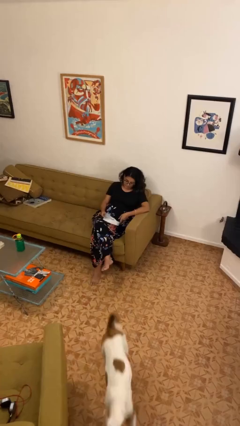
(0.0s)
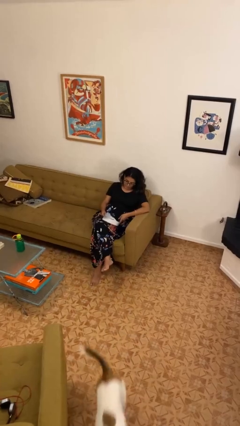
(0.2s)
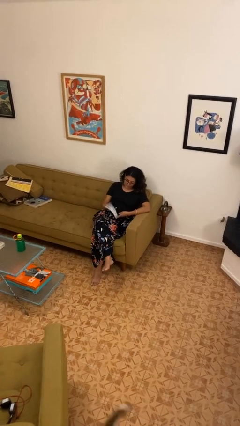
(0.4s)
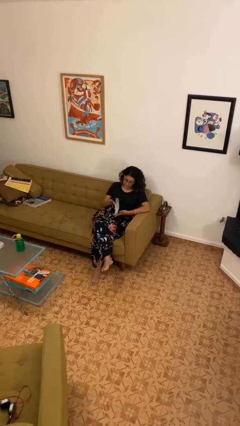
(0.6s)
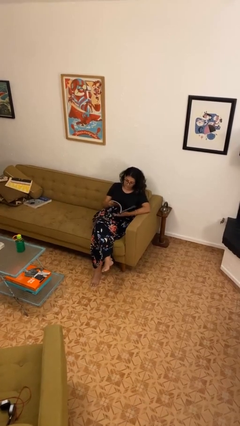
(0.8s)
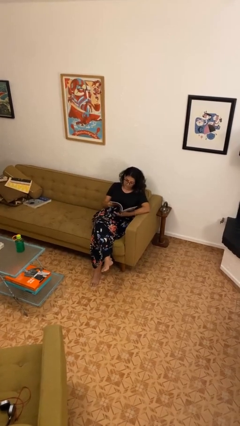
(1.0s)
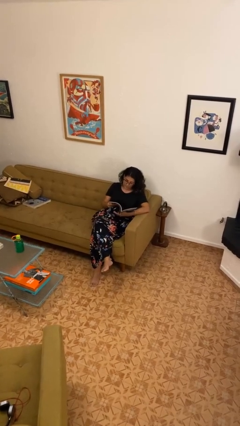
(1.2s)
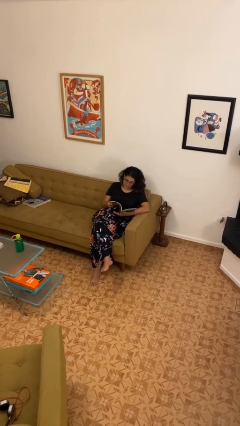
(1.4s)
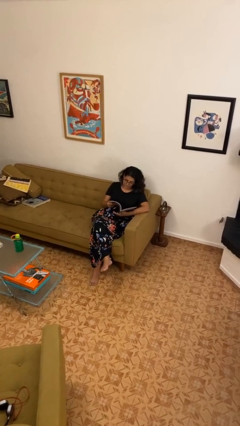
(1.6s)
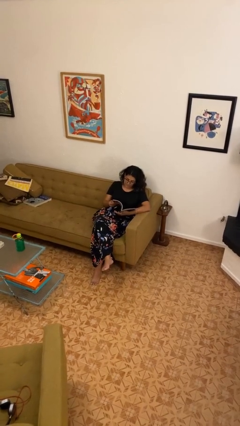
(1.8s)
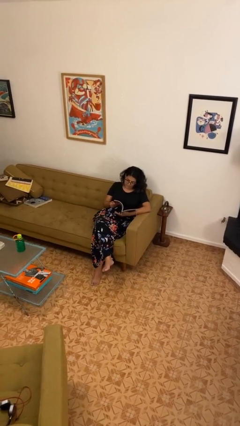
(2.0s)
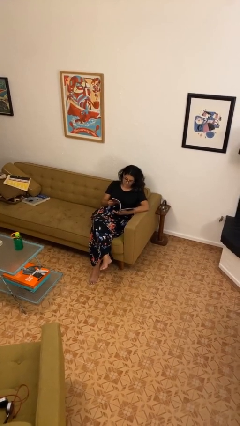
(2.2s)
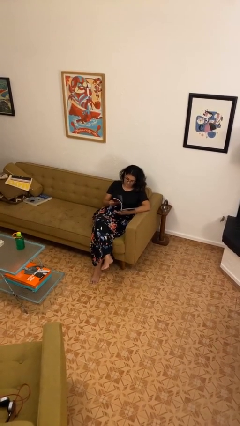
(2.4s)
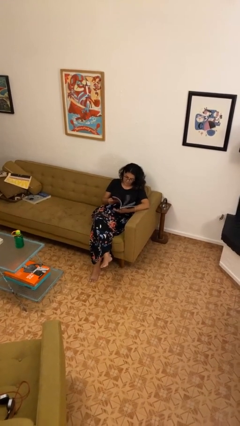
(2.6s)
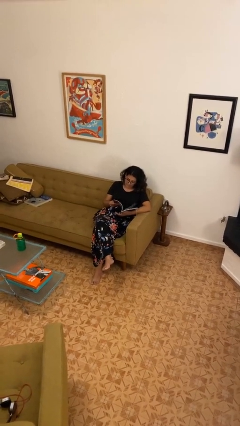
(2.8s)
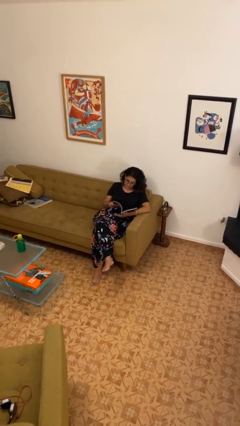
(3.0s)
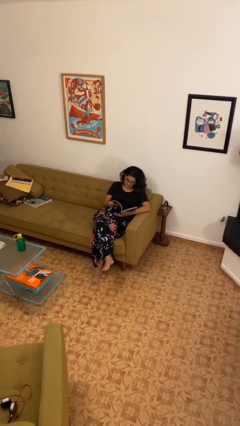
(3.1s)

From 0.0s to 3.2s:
person reads magazine

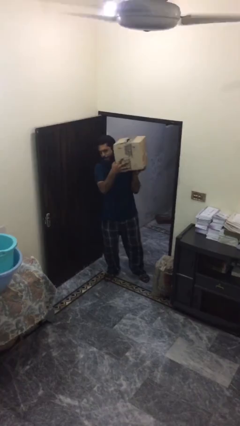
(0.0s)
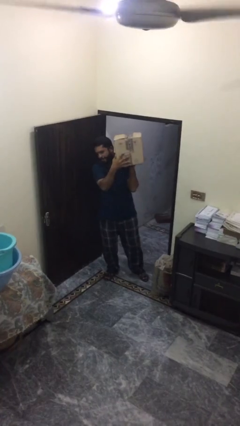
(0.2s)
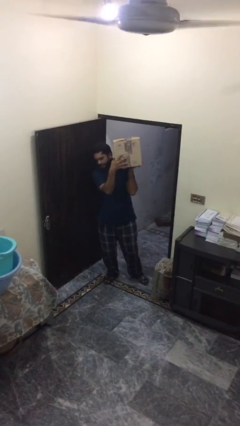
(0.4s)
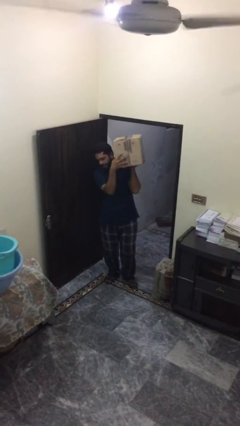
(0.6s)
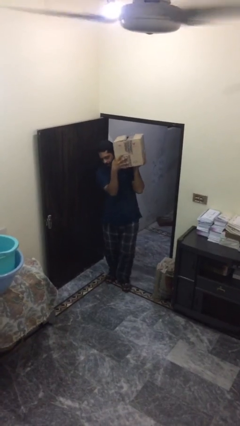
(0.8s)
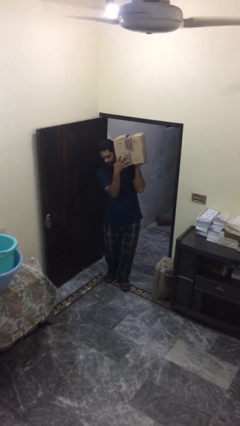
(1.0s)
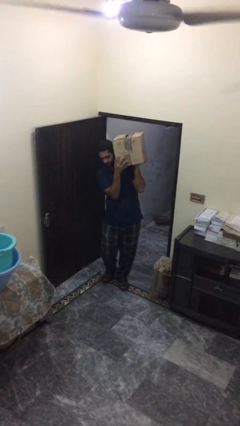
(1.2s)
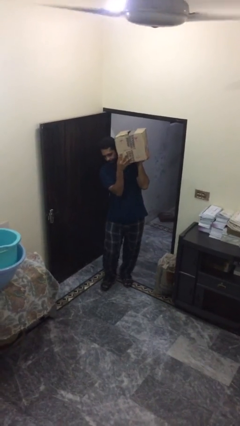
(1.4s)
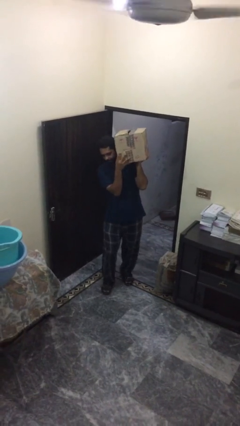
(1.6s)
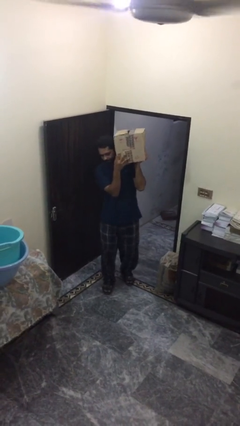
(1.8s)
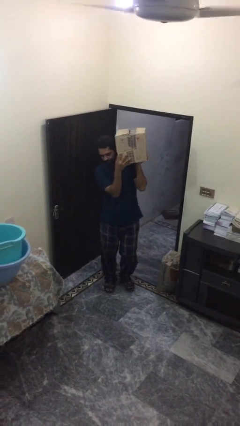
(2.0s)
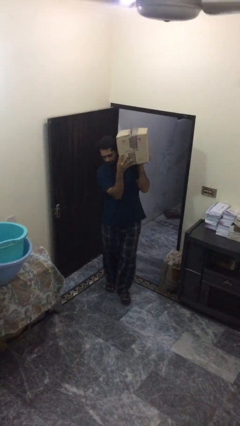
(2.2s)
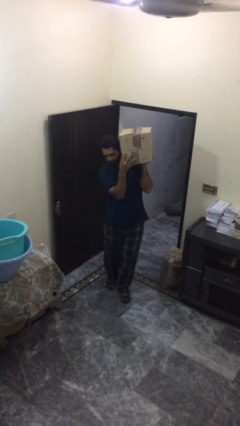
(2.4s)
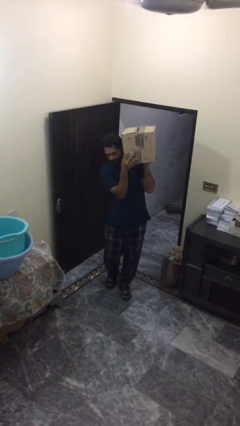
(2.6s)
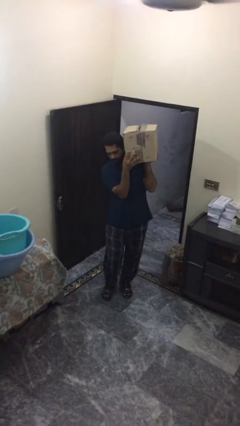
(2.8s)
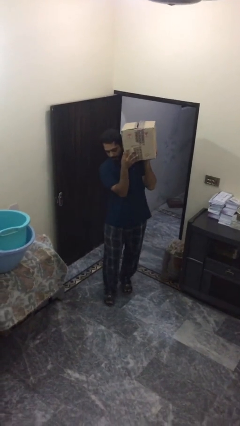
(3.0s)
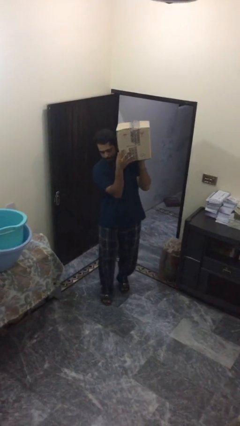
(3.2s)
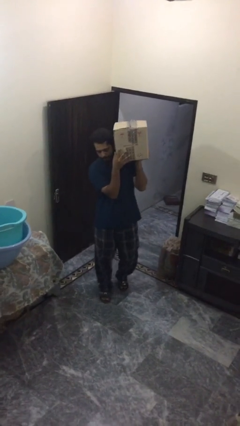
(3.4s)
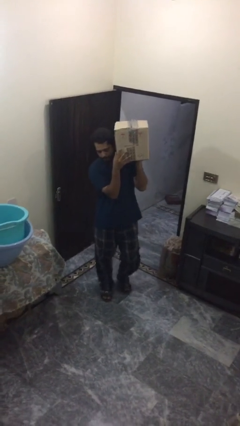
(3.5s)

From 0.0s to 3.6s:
person carries heavy object

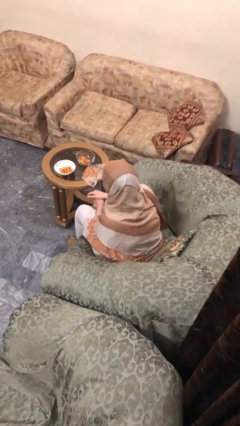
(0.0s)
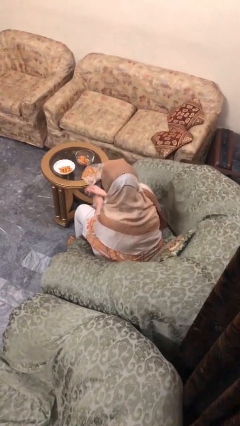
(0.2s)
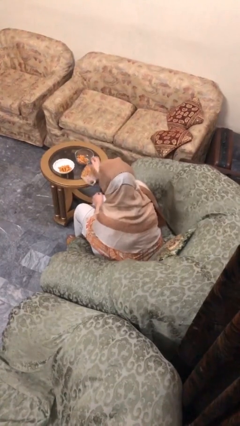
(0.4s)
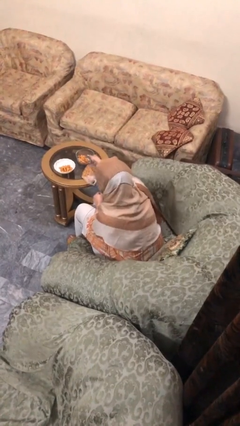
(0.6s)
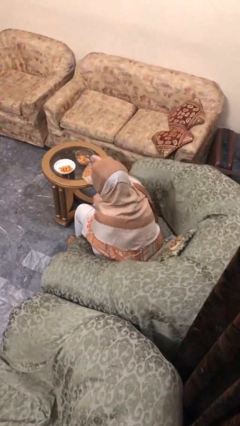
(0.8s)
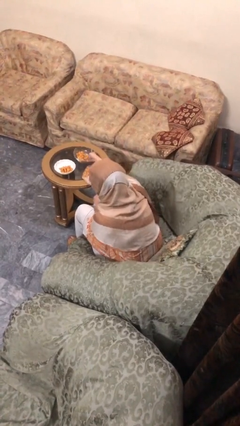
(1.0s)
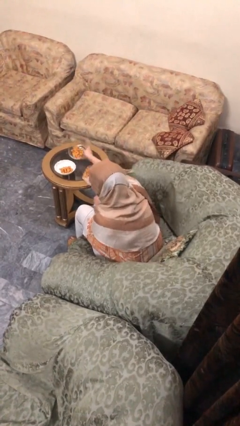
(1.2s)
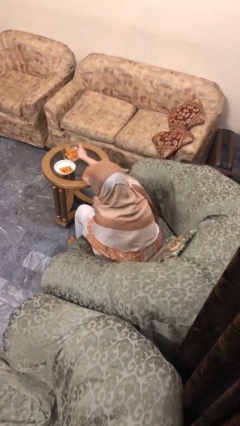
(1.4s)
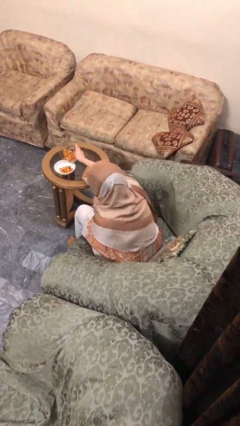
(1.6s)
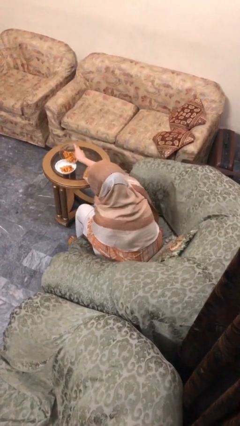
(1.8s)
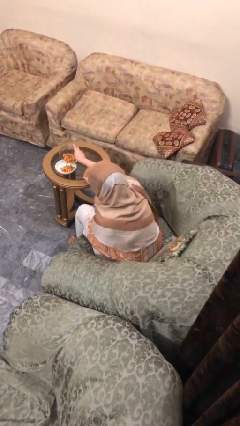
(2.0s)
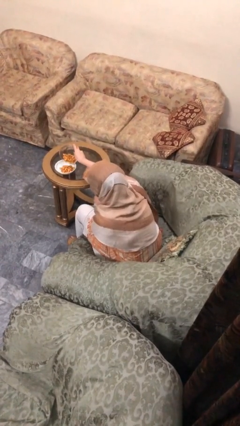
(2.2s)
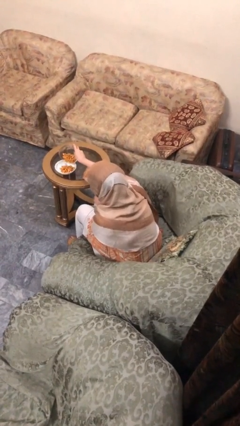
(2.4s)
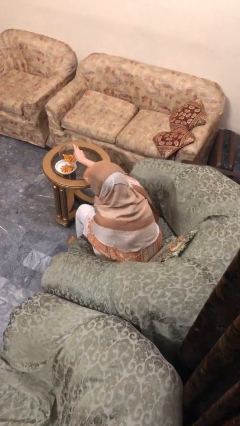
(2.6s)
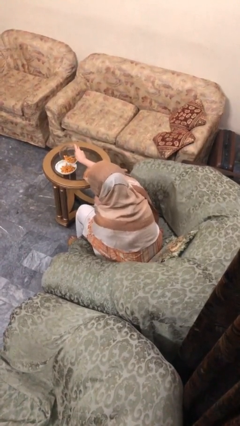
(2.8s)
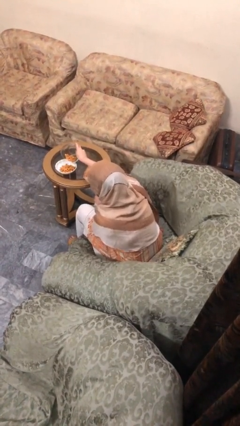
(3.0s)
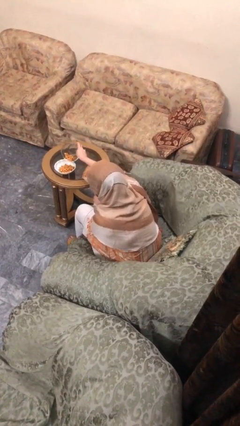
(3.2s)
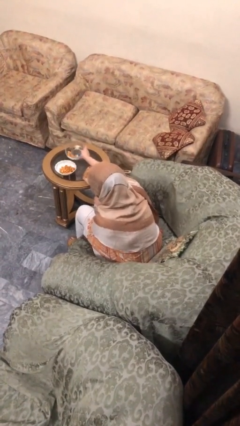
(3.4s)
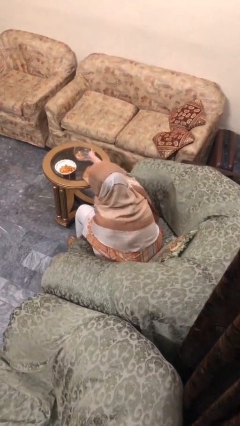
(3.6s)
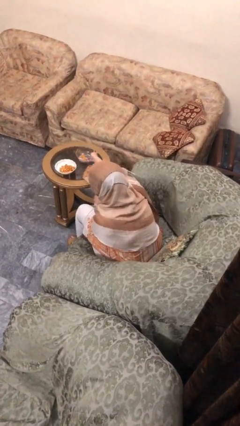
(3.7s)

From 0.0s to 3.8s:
person pours into bowl

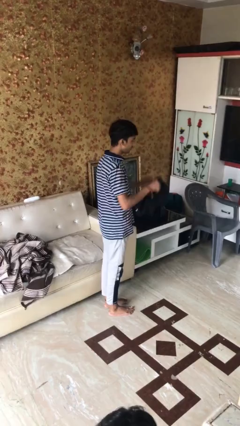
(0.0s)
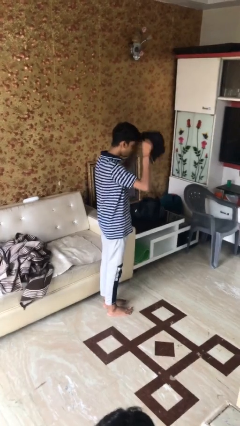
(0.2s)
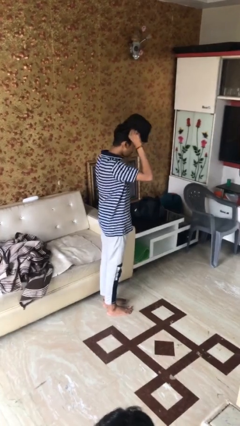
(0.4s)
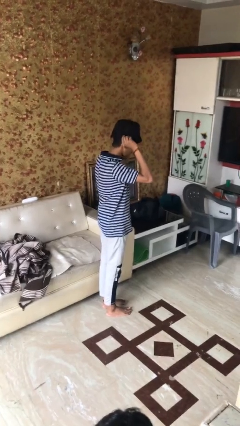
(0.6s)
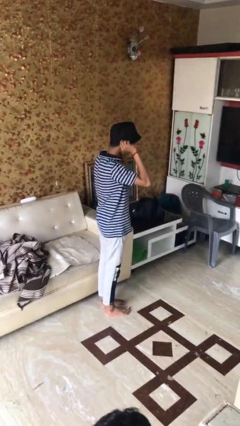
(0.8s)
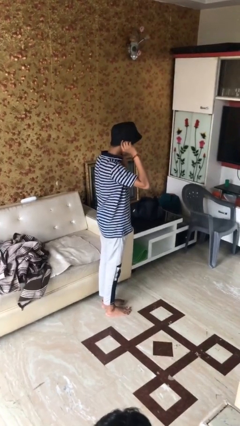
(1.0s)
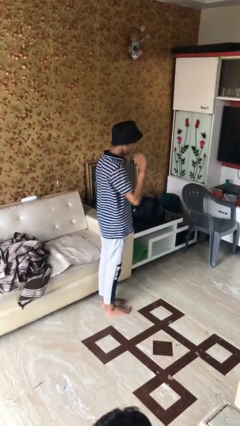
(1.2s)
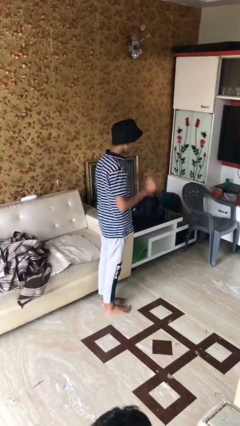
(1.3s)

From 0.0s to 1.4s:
person puts on hat

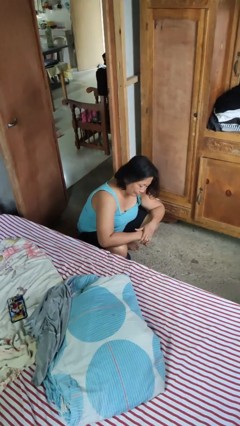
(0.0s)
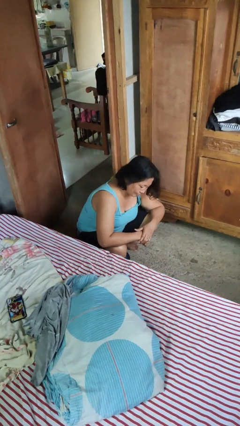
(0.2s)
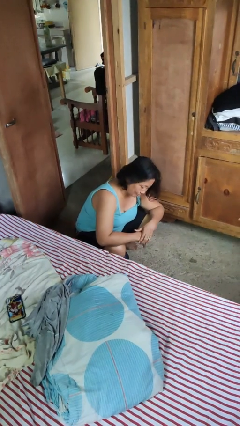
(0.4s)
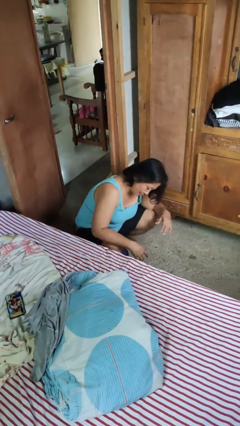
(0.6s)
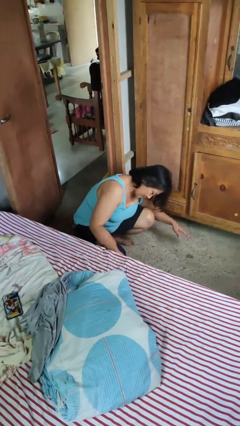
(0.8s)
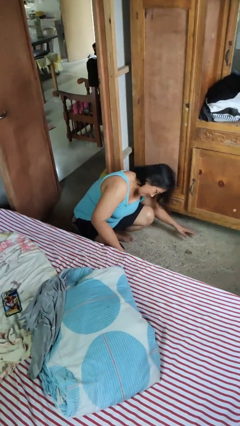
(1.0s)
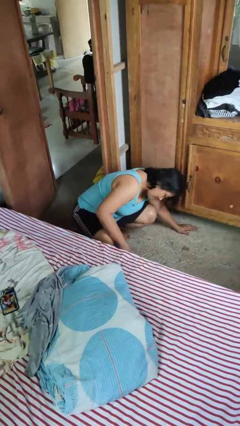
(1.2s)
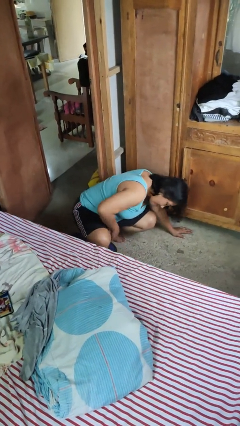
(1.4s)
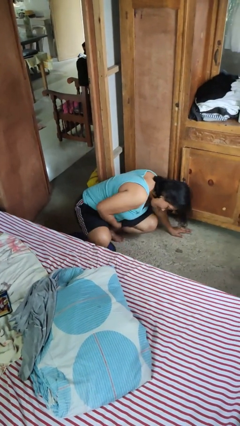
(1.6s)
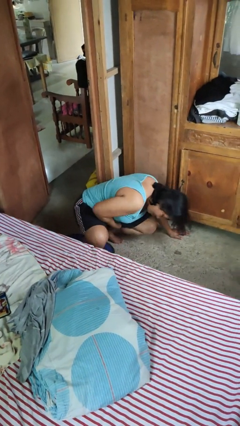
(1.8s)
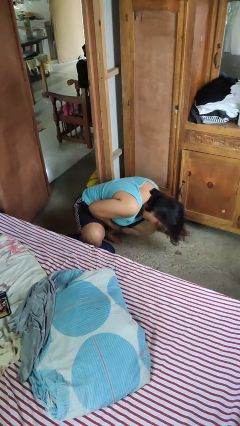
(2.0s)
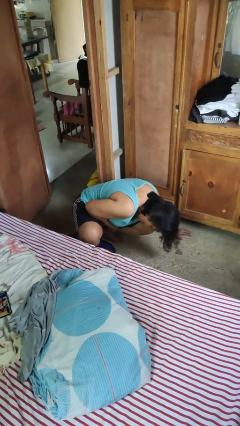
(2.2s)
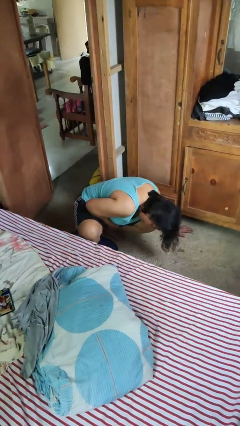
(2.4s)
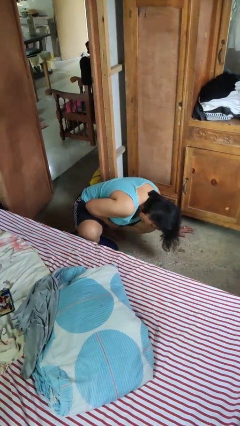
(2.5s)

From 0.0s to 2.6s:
person searches under bed

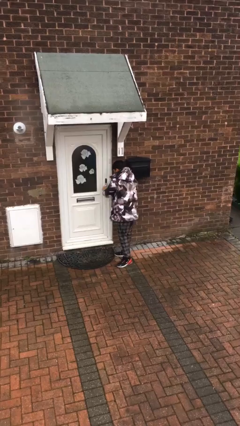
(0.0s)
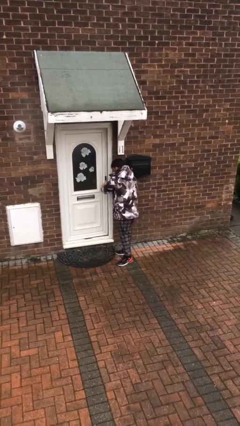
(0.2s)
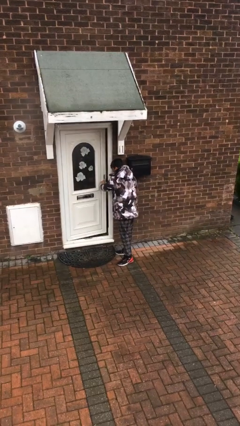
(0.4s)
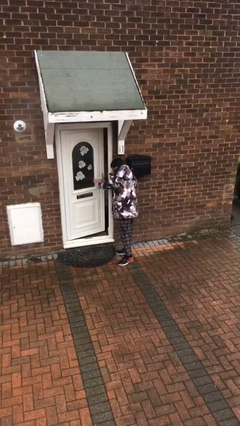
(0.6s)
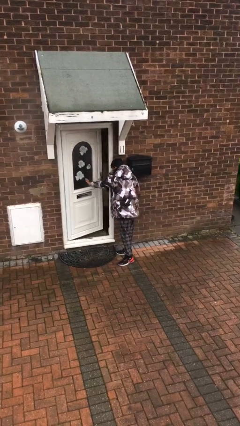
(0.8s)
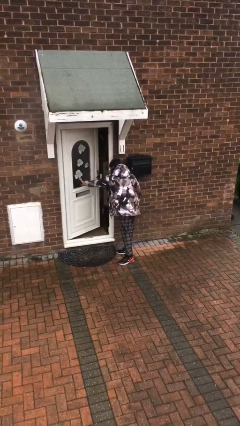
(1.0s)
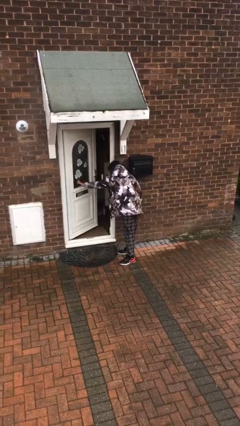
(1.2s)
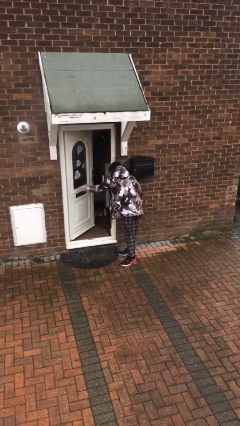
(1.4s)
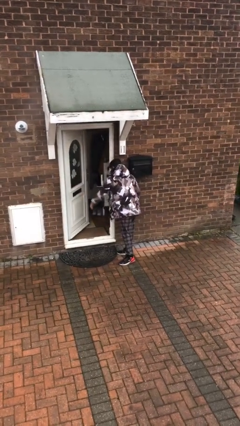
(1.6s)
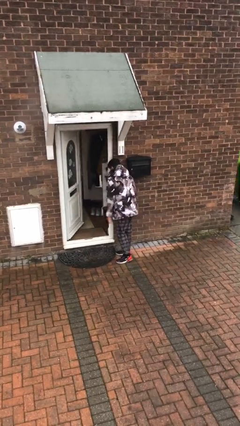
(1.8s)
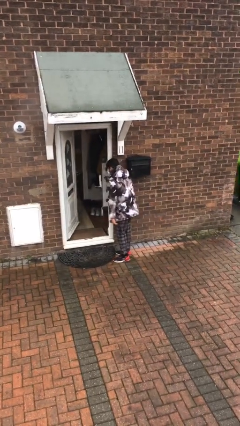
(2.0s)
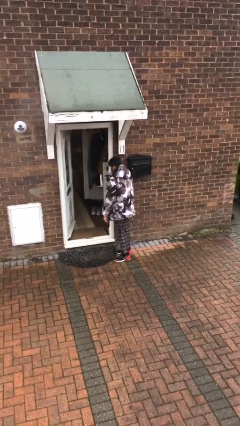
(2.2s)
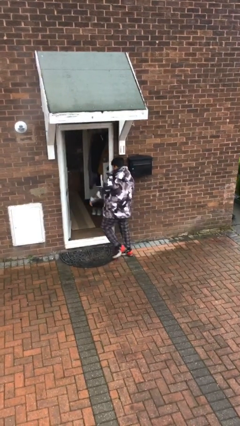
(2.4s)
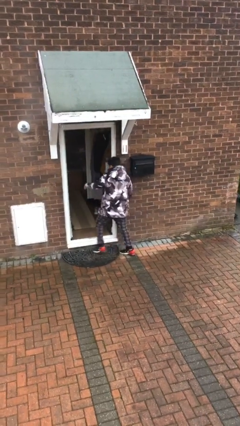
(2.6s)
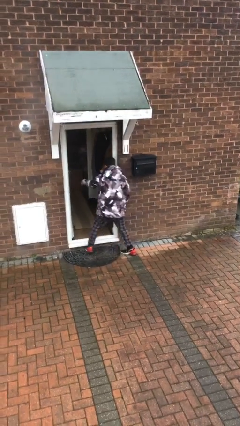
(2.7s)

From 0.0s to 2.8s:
person opens facility door
